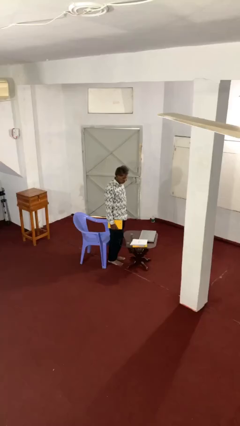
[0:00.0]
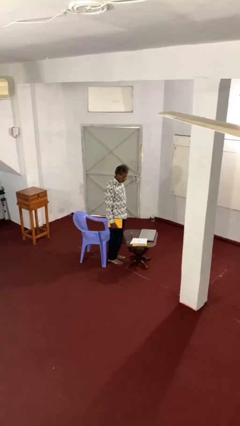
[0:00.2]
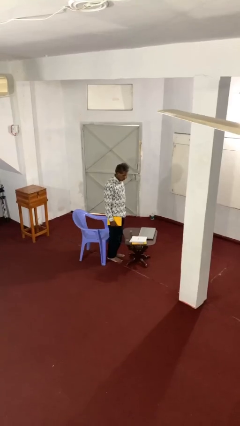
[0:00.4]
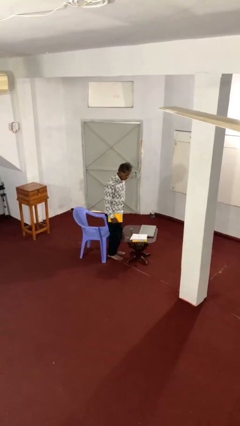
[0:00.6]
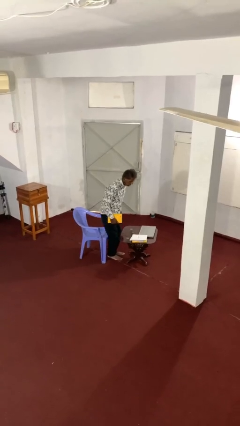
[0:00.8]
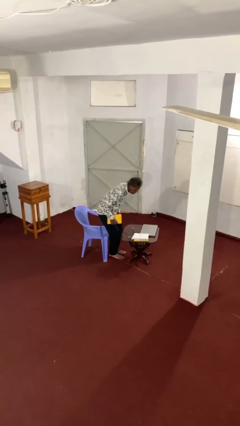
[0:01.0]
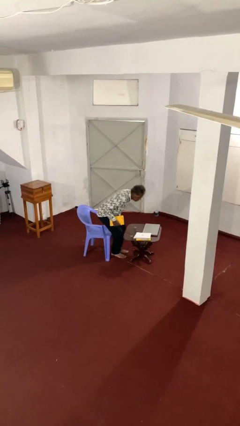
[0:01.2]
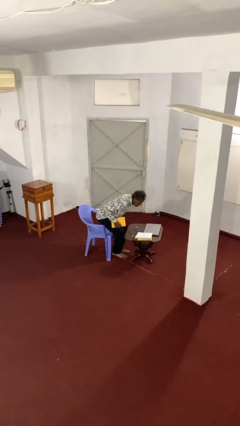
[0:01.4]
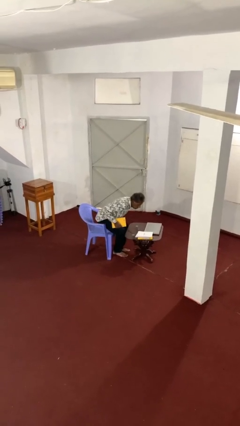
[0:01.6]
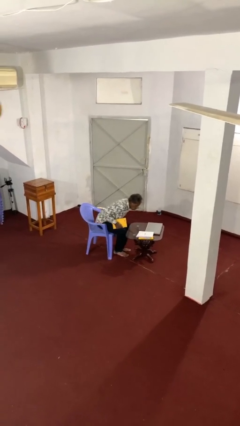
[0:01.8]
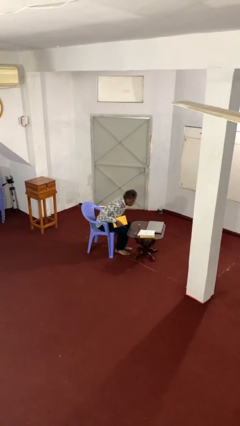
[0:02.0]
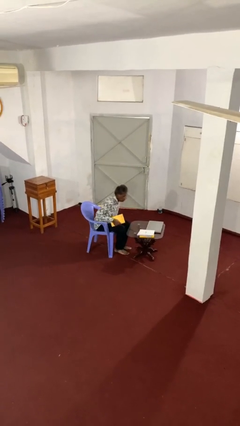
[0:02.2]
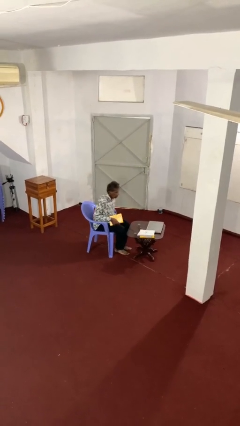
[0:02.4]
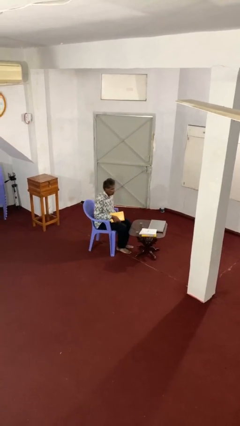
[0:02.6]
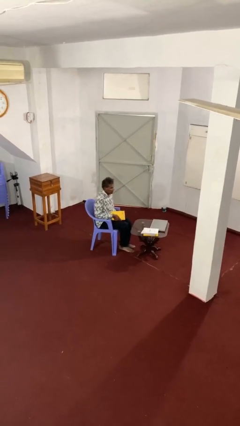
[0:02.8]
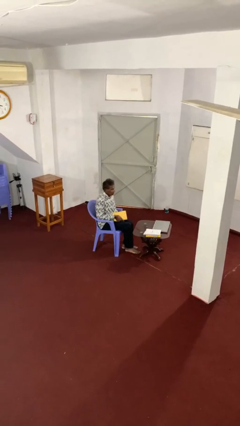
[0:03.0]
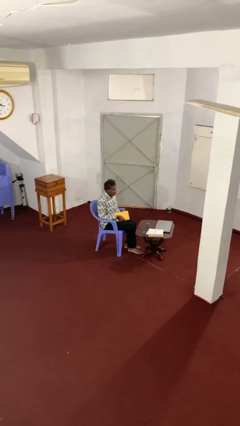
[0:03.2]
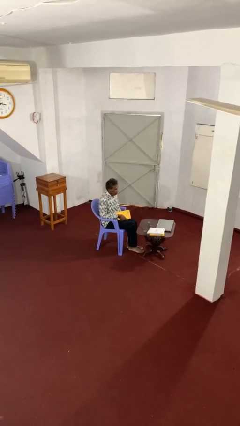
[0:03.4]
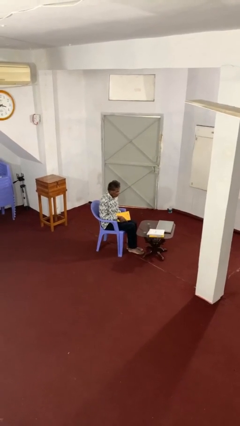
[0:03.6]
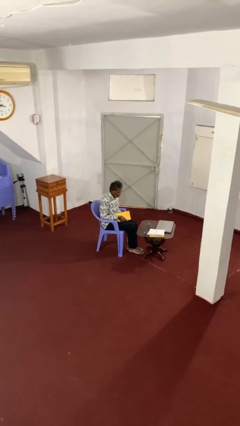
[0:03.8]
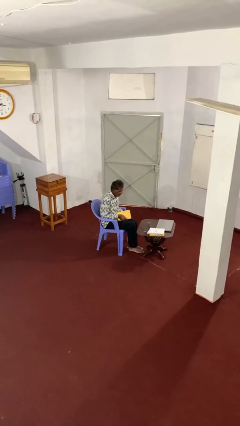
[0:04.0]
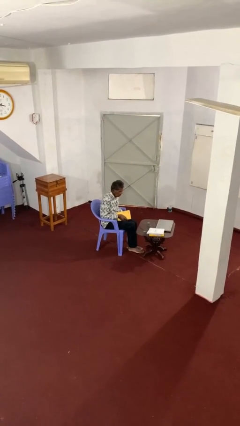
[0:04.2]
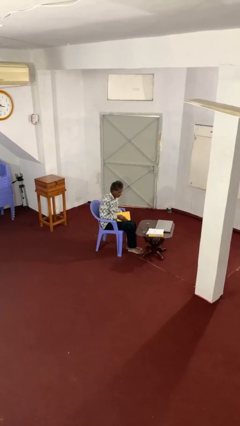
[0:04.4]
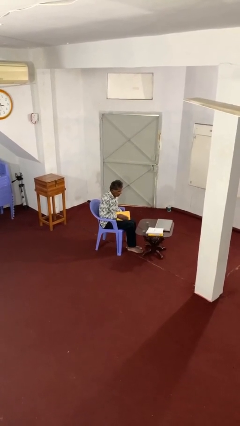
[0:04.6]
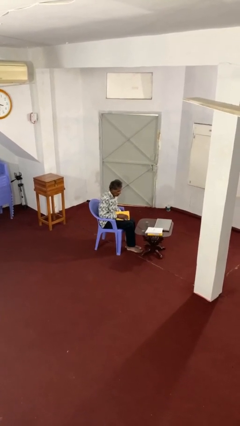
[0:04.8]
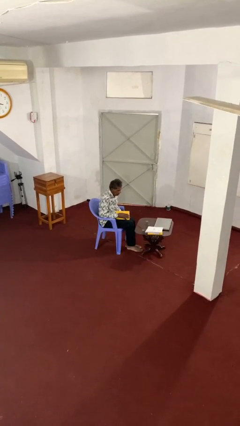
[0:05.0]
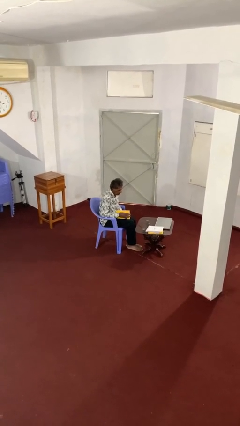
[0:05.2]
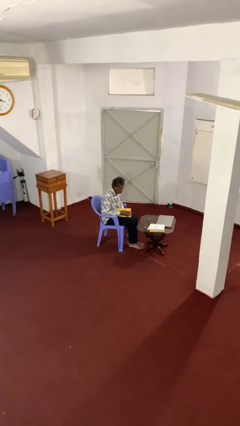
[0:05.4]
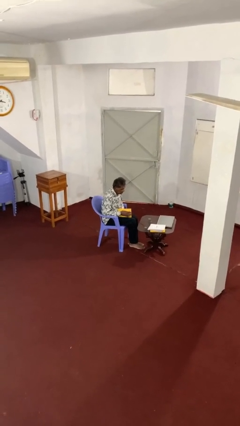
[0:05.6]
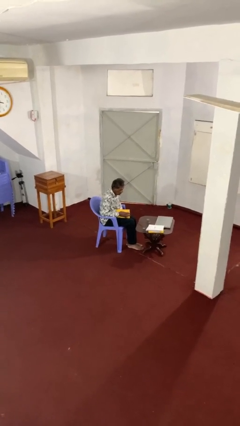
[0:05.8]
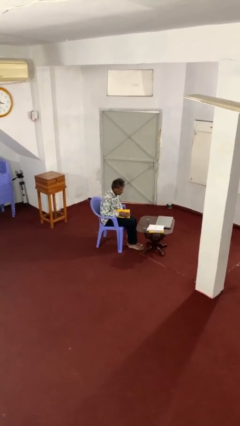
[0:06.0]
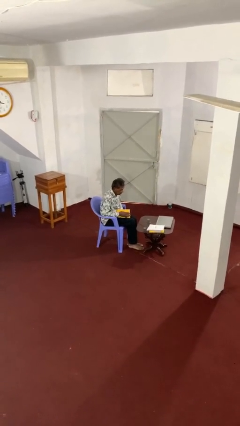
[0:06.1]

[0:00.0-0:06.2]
person sits down

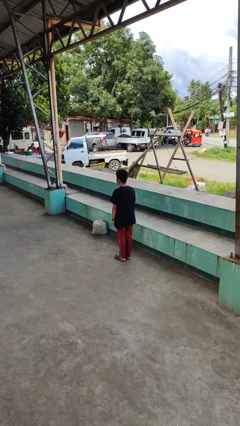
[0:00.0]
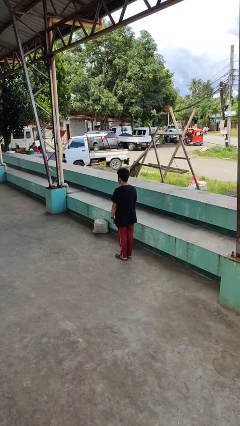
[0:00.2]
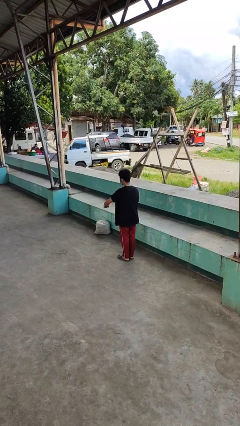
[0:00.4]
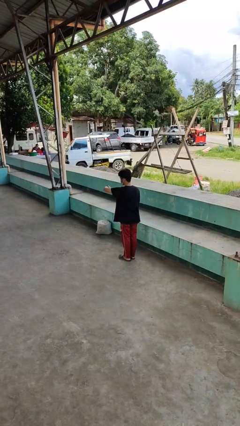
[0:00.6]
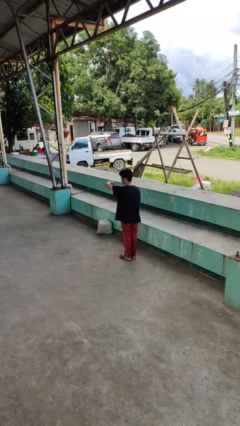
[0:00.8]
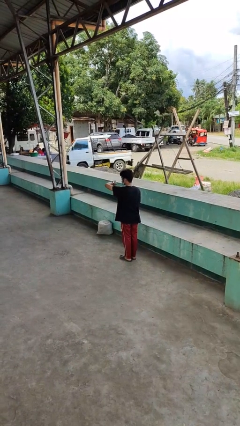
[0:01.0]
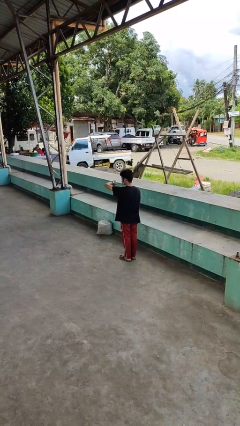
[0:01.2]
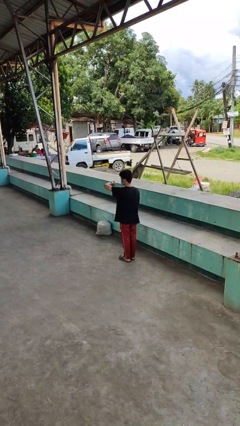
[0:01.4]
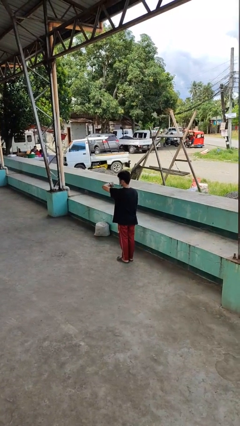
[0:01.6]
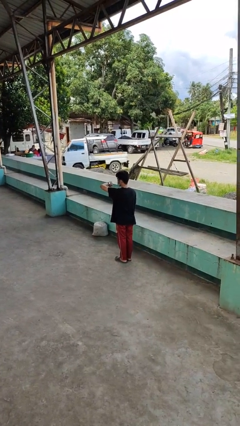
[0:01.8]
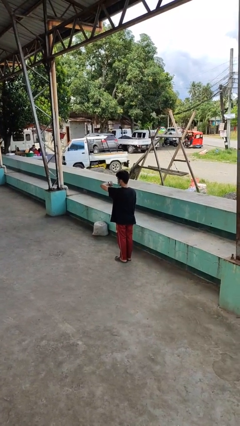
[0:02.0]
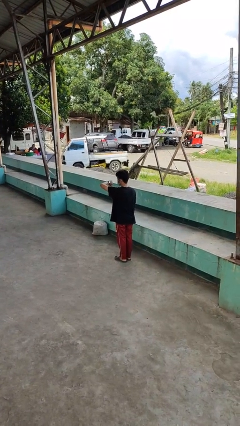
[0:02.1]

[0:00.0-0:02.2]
person looks at wristwatch

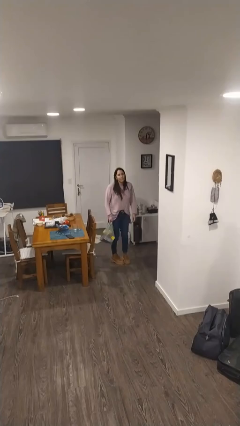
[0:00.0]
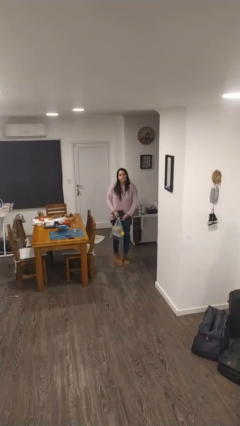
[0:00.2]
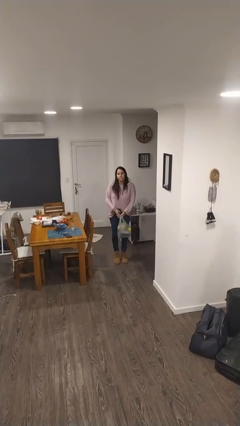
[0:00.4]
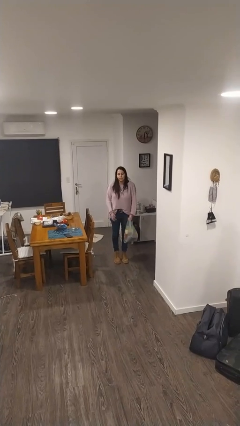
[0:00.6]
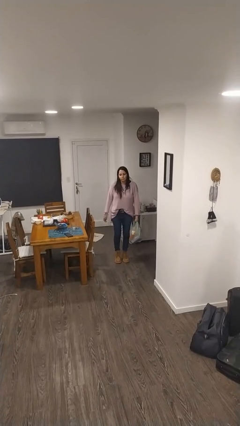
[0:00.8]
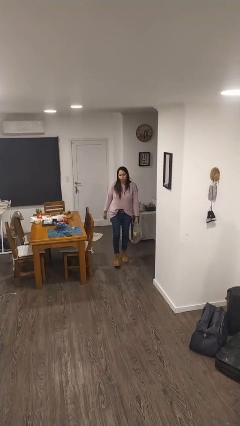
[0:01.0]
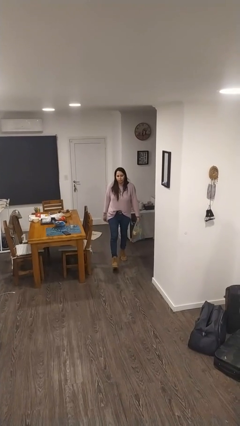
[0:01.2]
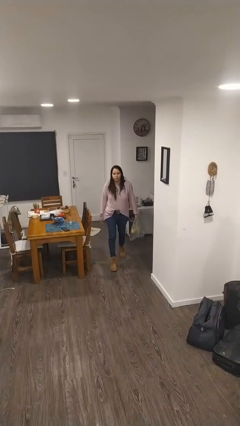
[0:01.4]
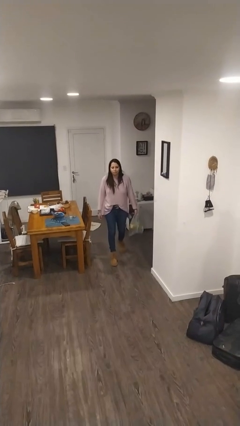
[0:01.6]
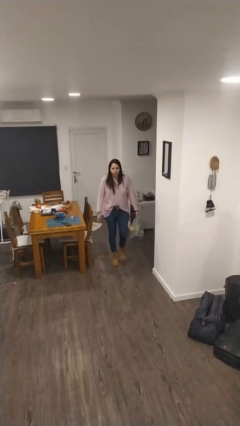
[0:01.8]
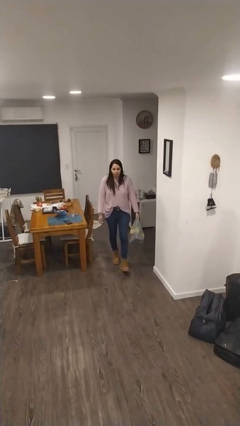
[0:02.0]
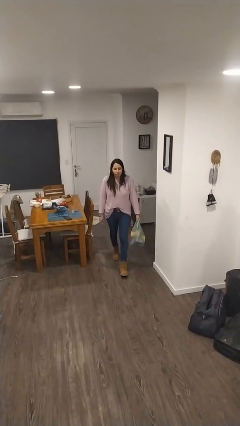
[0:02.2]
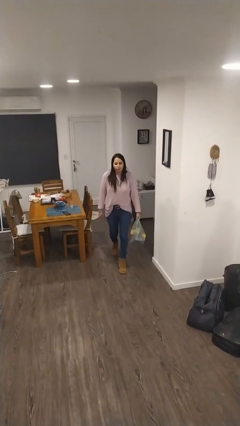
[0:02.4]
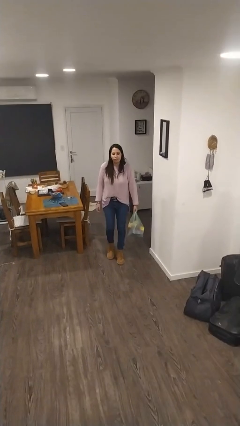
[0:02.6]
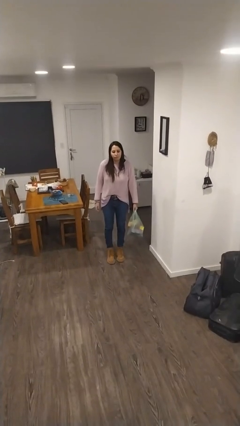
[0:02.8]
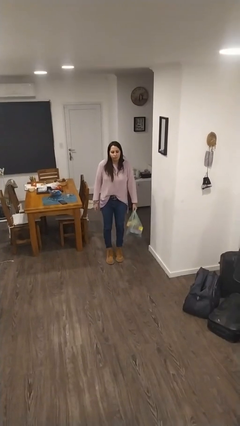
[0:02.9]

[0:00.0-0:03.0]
person carries groceries

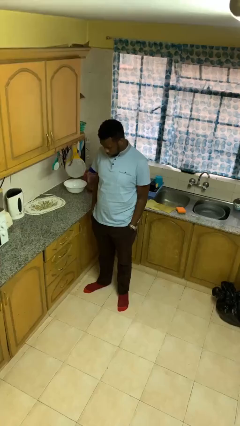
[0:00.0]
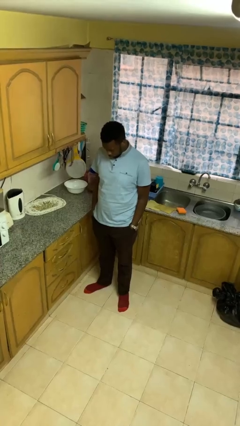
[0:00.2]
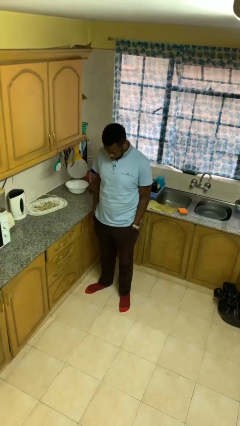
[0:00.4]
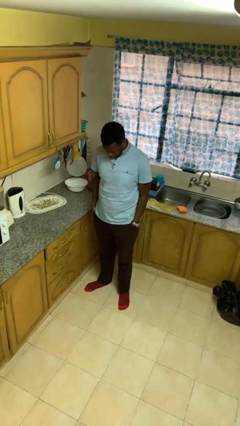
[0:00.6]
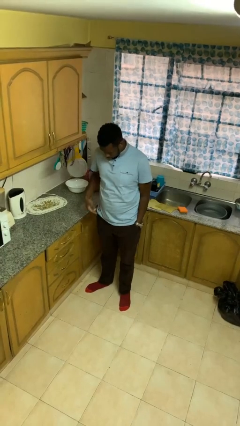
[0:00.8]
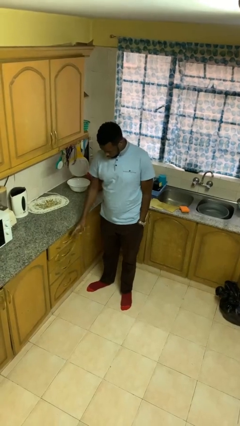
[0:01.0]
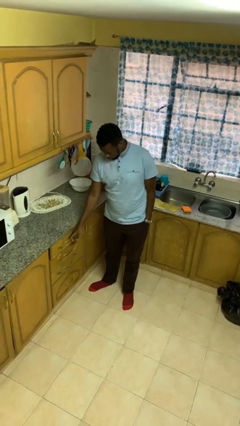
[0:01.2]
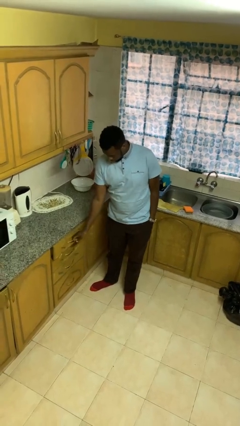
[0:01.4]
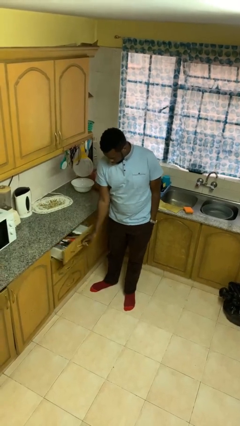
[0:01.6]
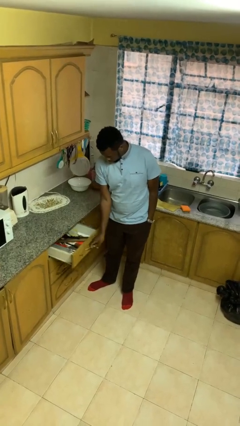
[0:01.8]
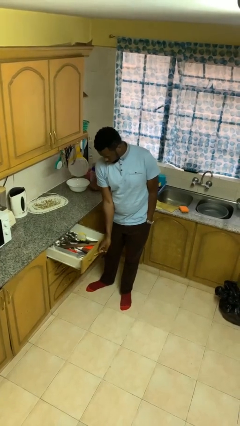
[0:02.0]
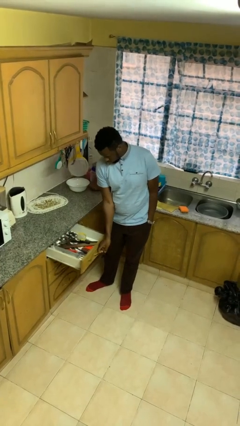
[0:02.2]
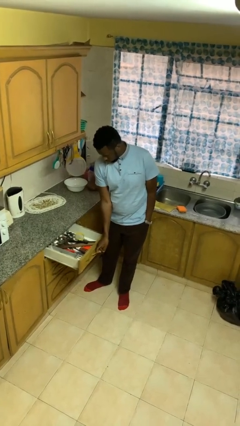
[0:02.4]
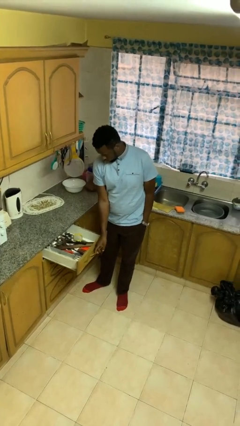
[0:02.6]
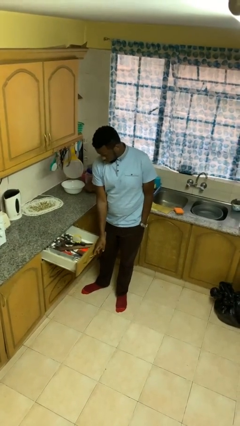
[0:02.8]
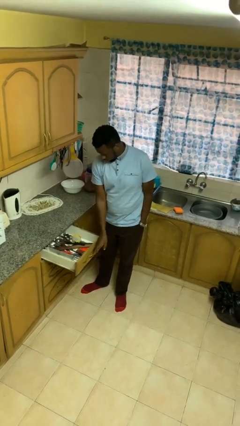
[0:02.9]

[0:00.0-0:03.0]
person opens kitchen drawer

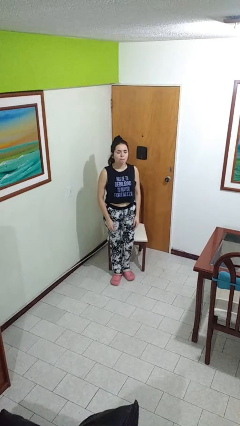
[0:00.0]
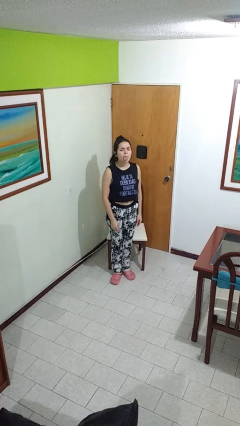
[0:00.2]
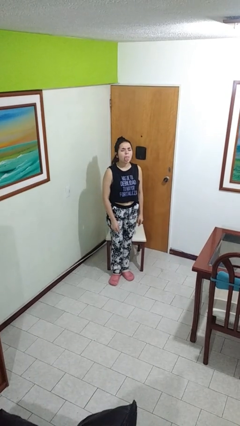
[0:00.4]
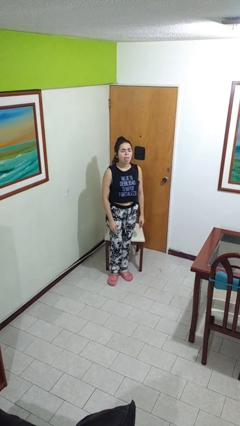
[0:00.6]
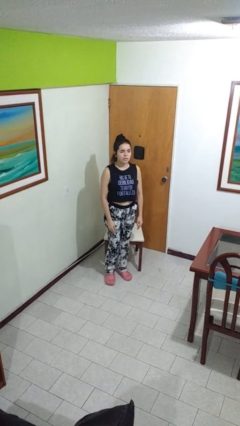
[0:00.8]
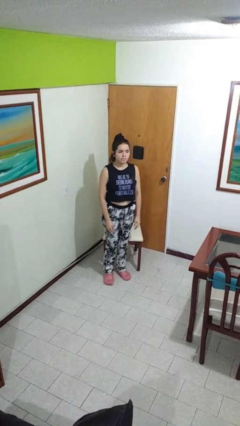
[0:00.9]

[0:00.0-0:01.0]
person sticks out tongue

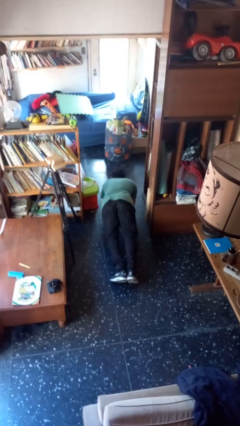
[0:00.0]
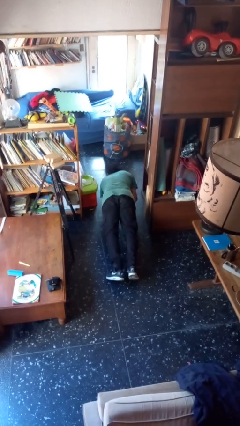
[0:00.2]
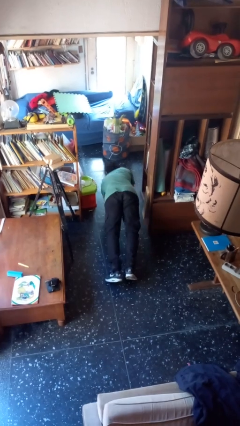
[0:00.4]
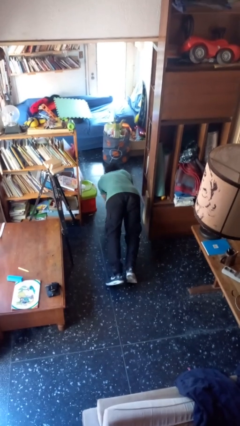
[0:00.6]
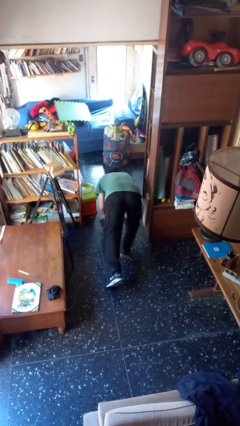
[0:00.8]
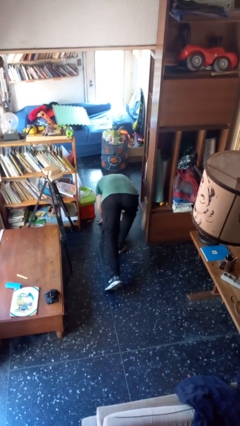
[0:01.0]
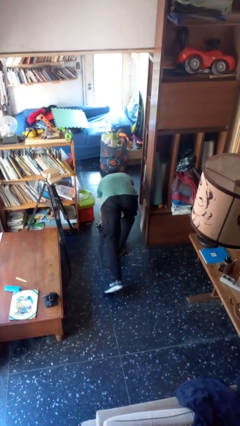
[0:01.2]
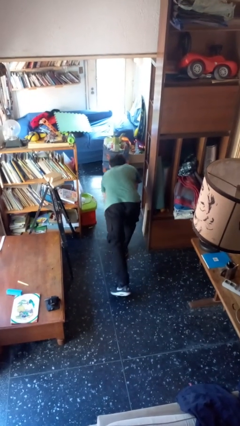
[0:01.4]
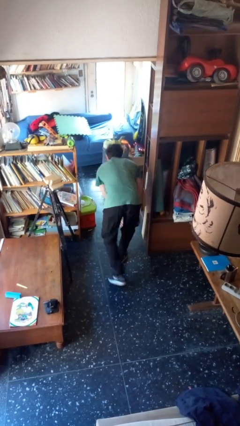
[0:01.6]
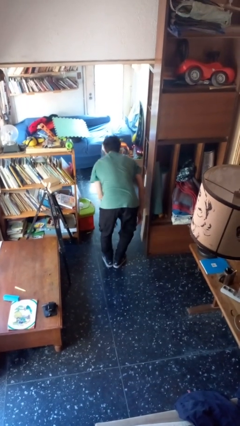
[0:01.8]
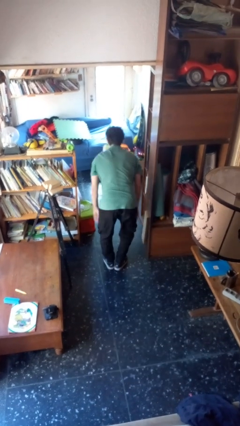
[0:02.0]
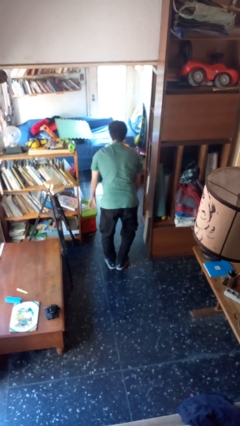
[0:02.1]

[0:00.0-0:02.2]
person stands up from floor
